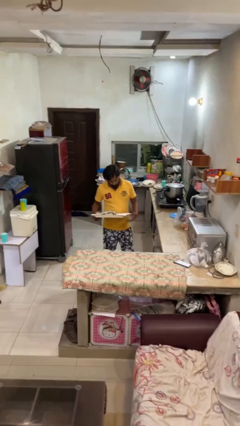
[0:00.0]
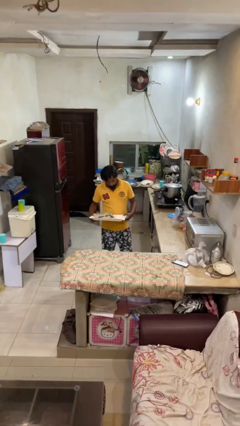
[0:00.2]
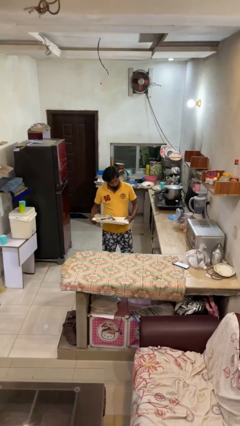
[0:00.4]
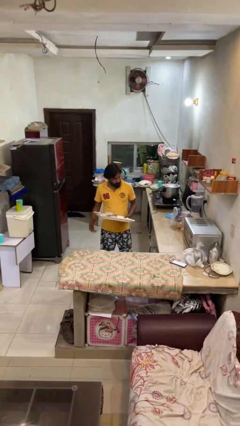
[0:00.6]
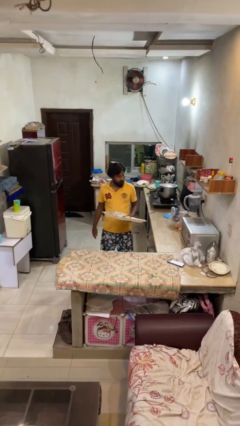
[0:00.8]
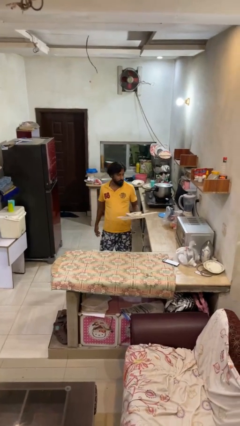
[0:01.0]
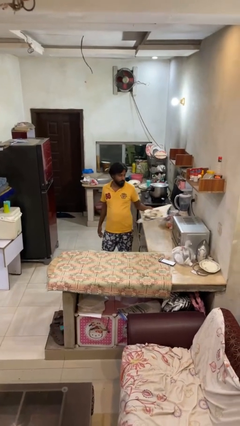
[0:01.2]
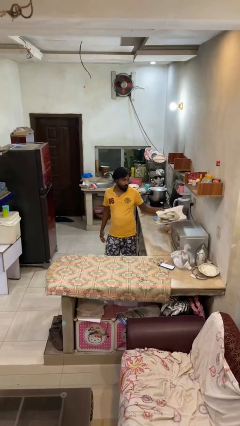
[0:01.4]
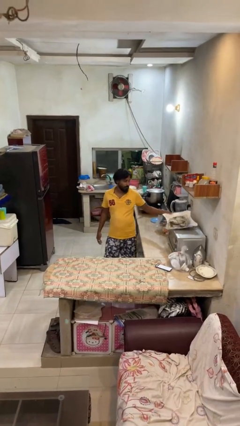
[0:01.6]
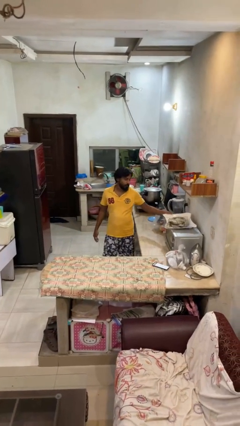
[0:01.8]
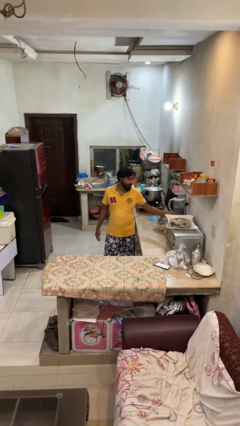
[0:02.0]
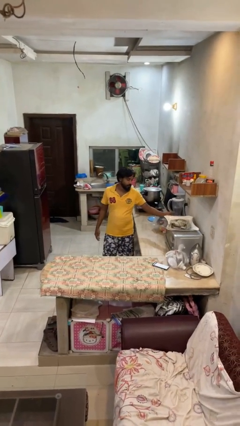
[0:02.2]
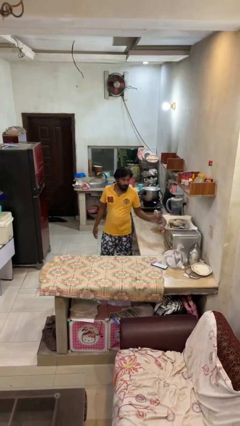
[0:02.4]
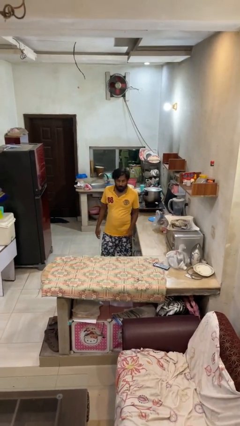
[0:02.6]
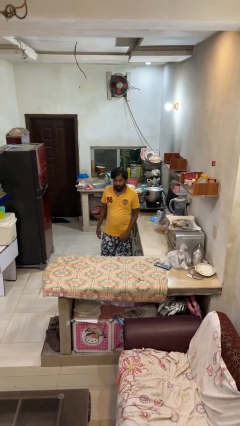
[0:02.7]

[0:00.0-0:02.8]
person puts down object on countertop

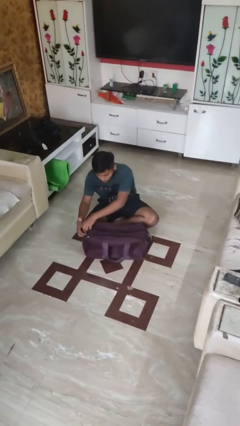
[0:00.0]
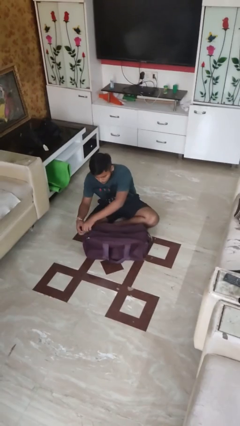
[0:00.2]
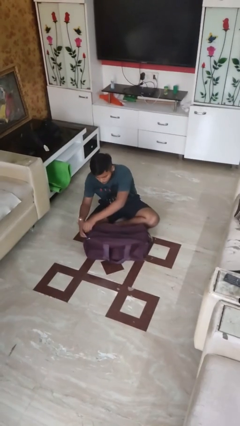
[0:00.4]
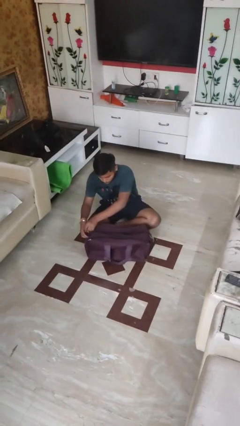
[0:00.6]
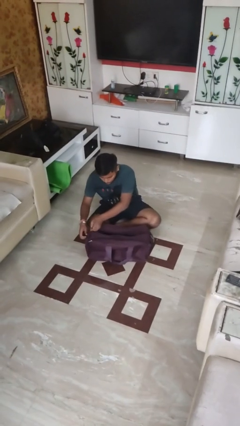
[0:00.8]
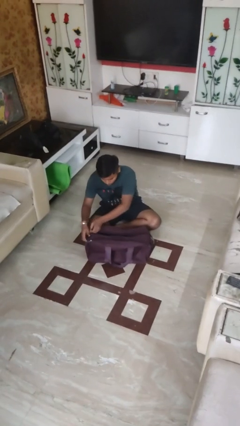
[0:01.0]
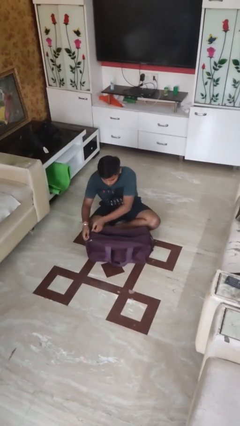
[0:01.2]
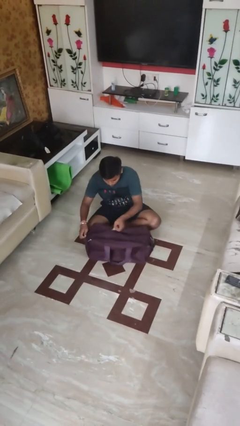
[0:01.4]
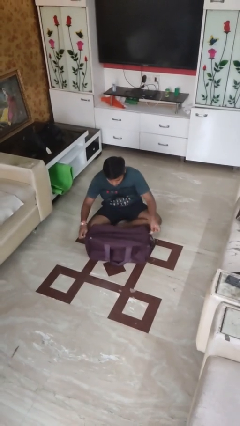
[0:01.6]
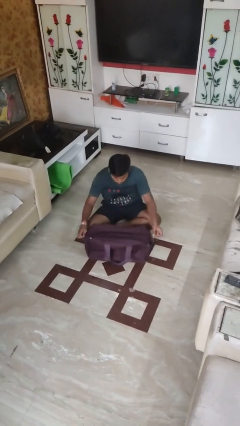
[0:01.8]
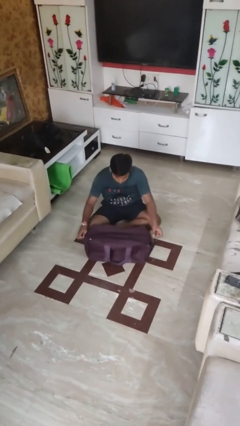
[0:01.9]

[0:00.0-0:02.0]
person closes suitcase

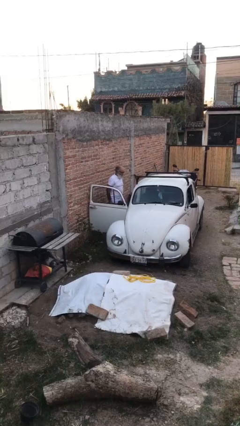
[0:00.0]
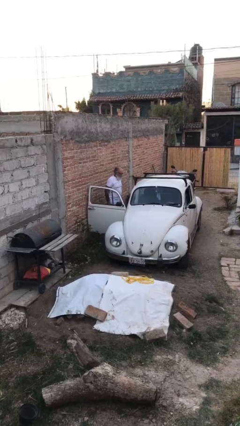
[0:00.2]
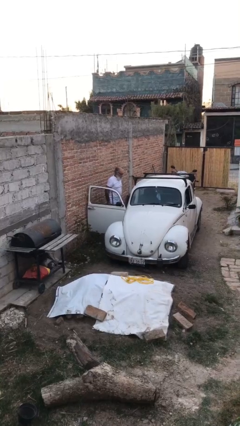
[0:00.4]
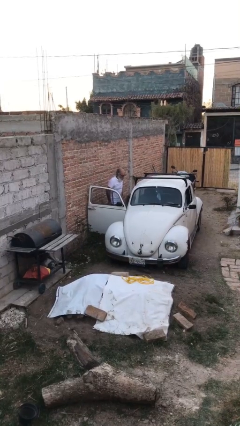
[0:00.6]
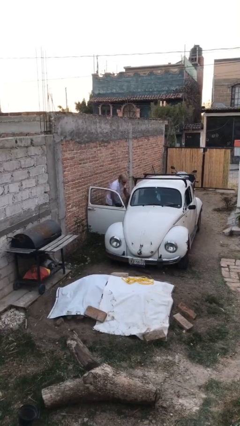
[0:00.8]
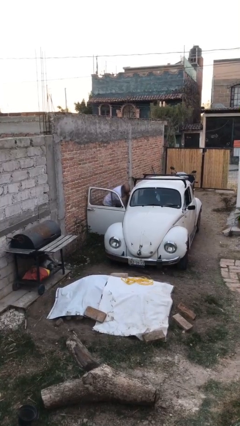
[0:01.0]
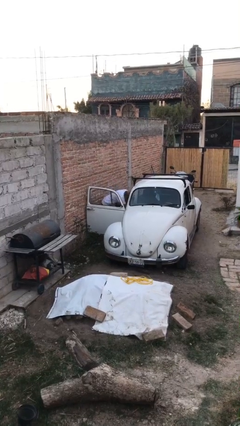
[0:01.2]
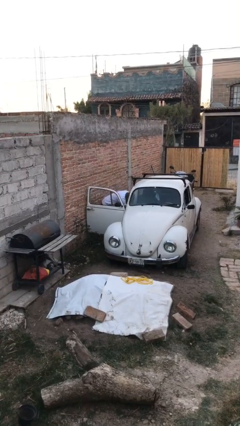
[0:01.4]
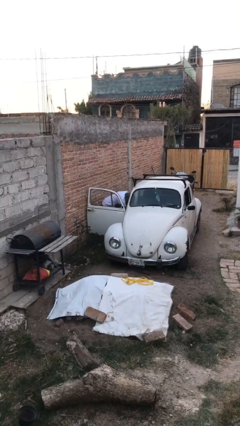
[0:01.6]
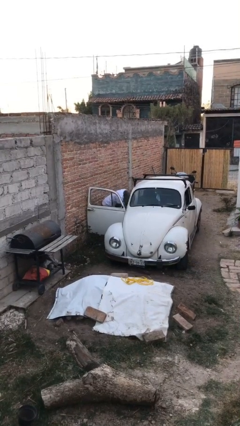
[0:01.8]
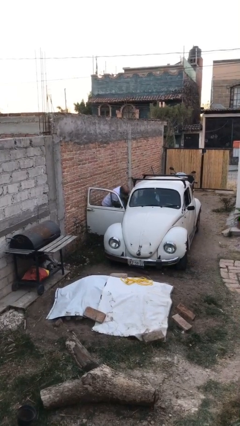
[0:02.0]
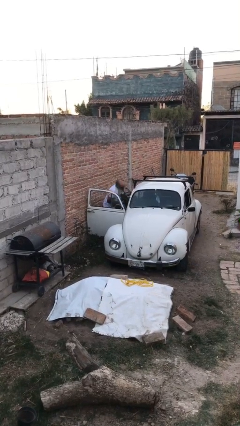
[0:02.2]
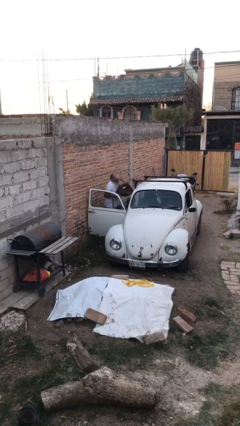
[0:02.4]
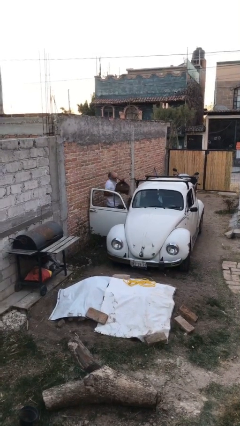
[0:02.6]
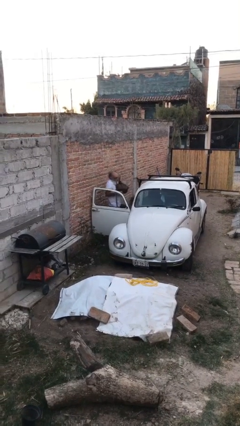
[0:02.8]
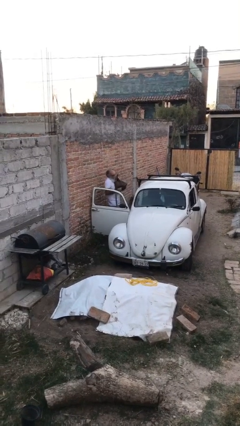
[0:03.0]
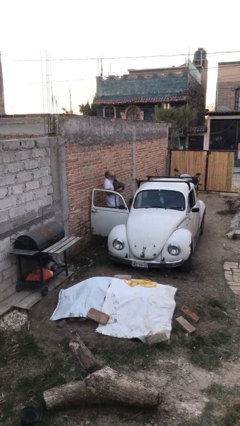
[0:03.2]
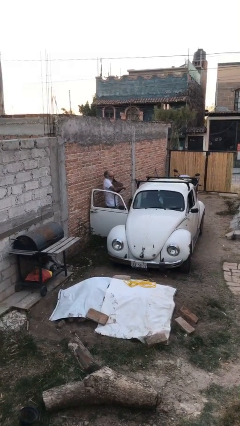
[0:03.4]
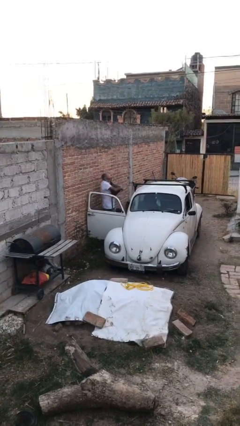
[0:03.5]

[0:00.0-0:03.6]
person unloads car

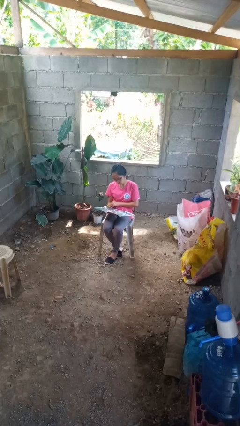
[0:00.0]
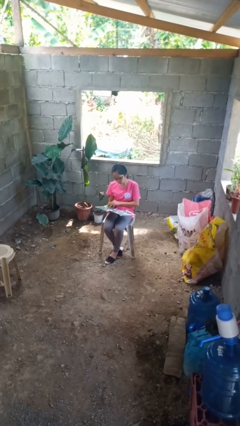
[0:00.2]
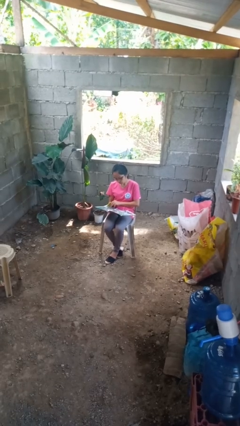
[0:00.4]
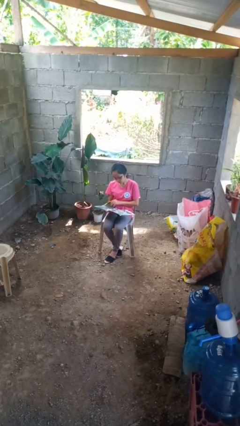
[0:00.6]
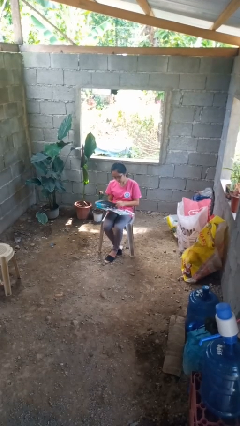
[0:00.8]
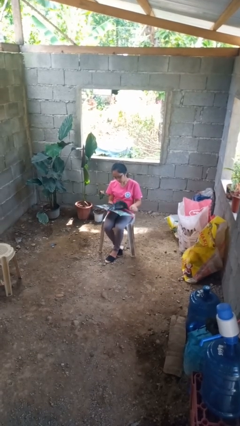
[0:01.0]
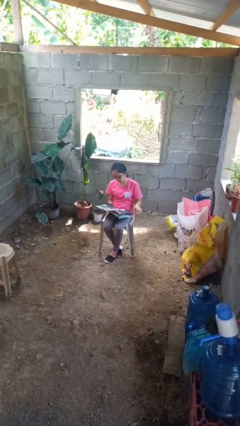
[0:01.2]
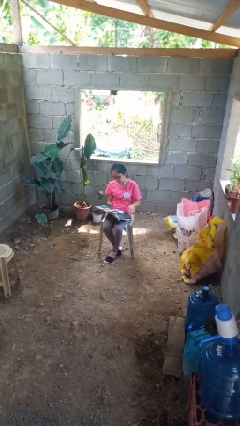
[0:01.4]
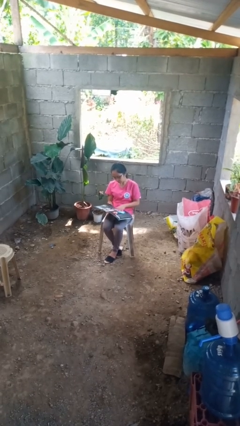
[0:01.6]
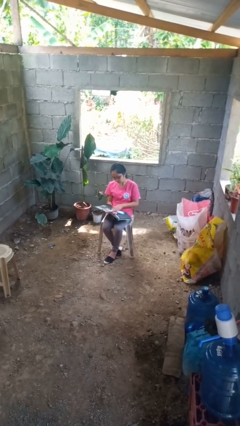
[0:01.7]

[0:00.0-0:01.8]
person reads magazine

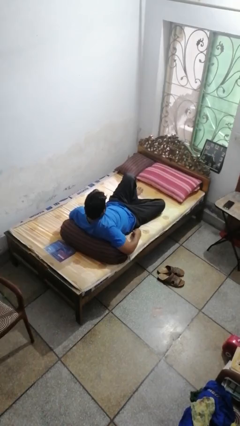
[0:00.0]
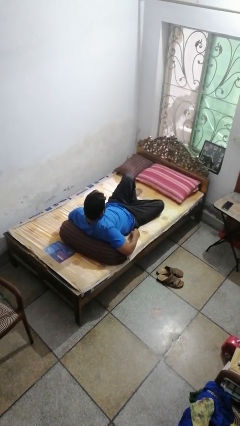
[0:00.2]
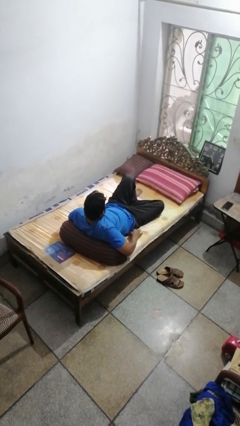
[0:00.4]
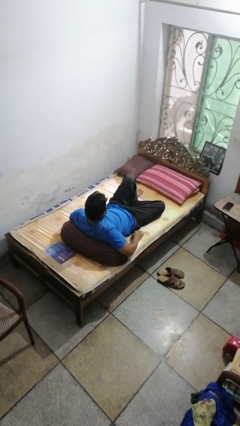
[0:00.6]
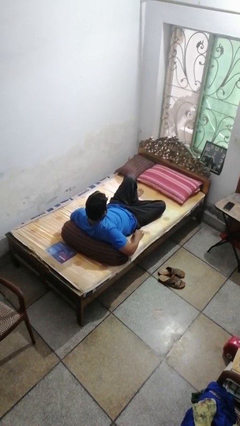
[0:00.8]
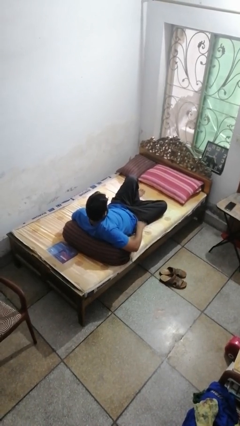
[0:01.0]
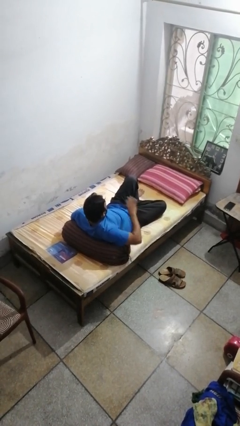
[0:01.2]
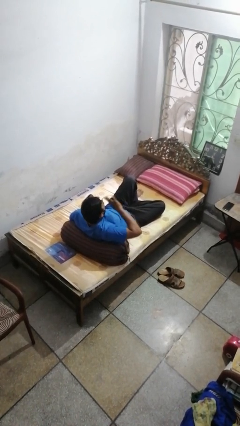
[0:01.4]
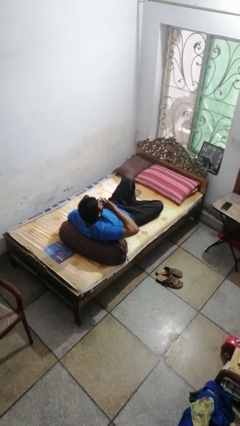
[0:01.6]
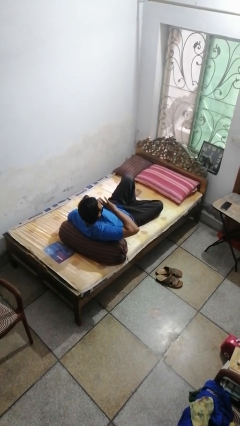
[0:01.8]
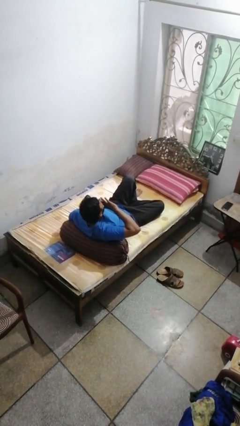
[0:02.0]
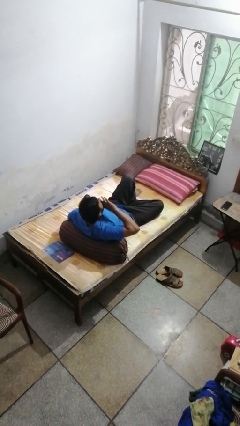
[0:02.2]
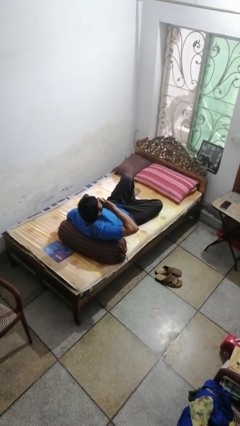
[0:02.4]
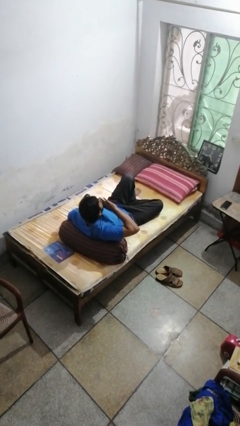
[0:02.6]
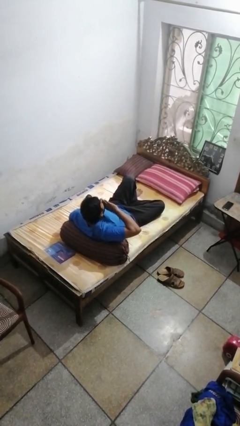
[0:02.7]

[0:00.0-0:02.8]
person yawns

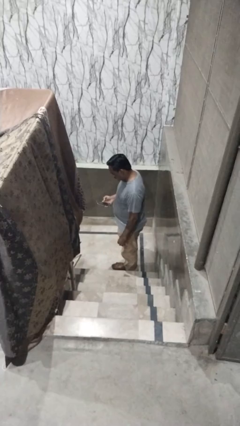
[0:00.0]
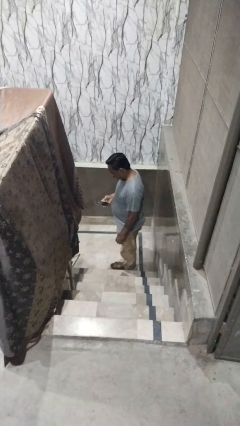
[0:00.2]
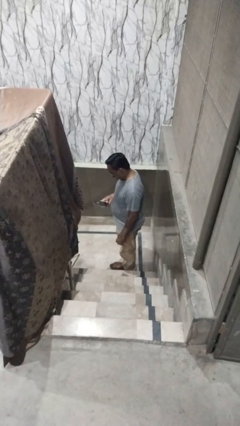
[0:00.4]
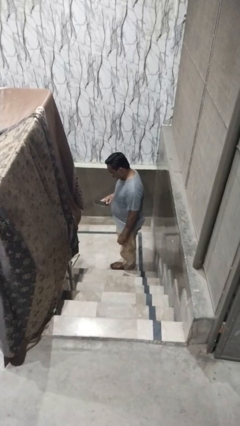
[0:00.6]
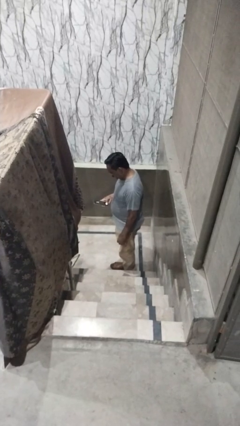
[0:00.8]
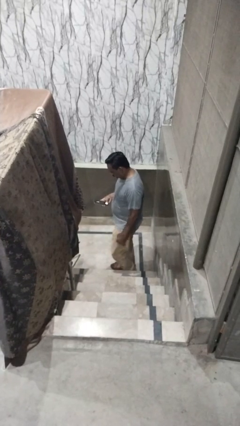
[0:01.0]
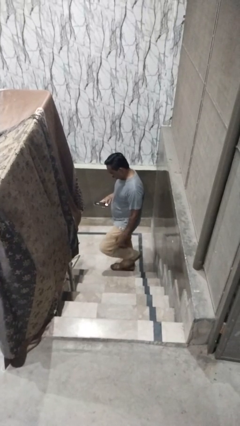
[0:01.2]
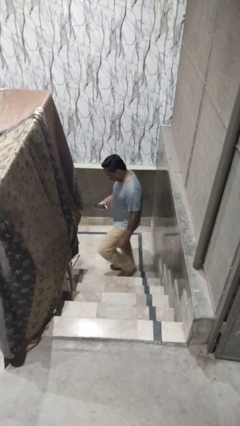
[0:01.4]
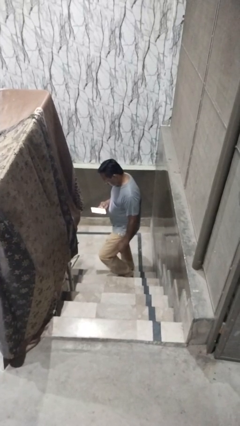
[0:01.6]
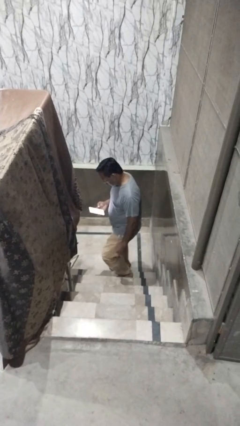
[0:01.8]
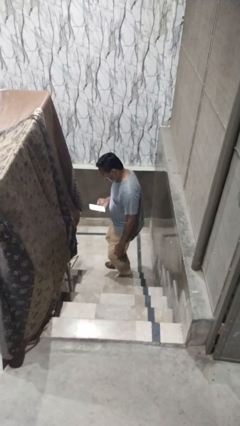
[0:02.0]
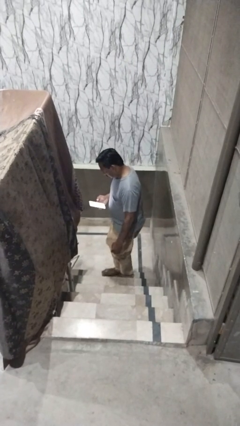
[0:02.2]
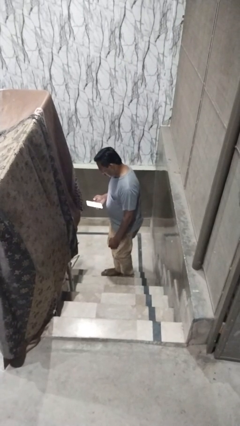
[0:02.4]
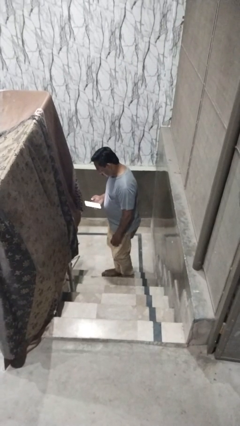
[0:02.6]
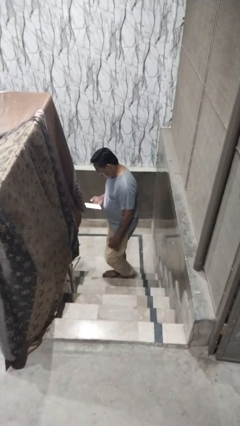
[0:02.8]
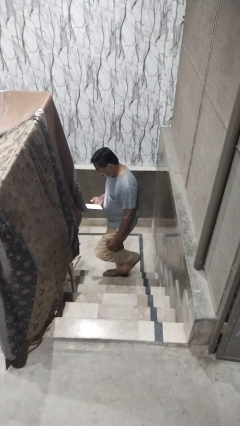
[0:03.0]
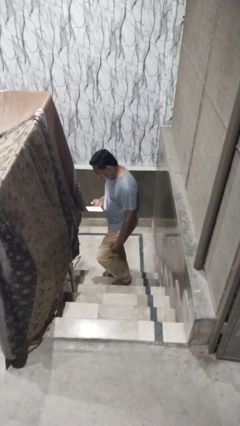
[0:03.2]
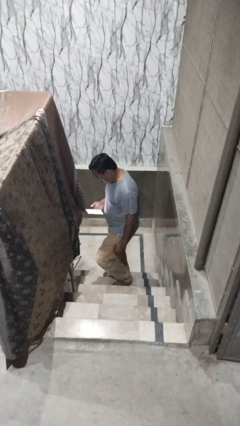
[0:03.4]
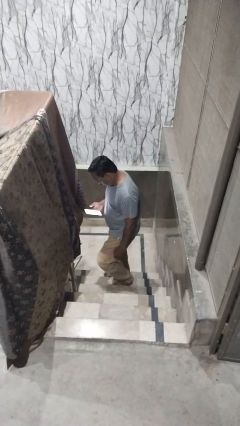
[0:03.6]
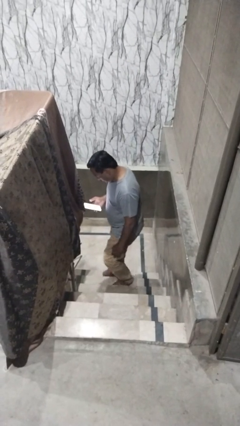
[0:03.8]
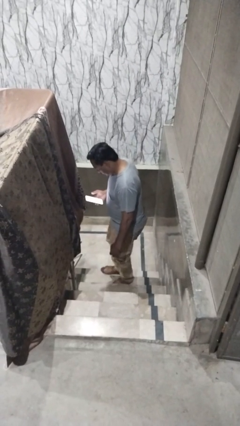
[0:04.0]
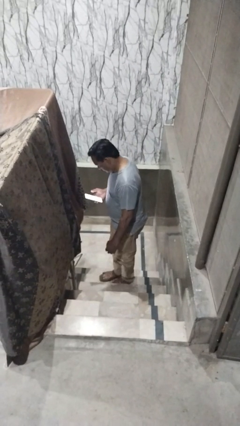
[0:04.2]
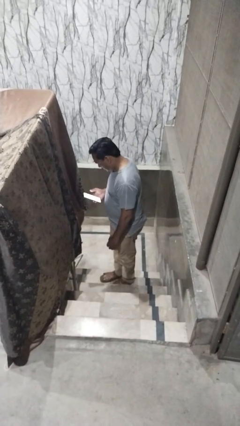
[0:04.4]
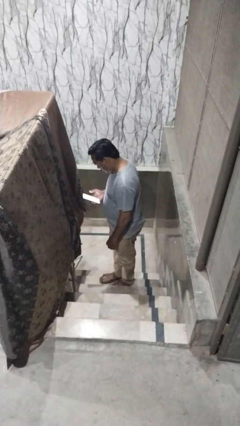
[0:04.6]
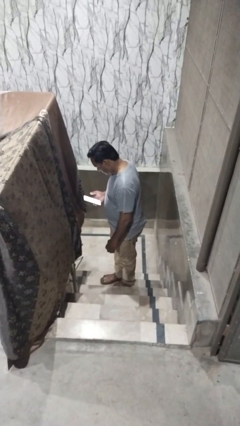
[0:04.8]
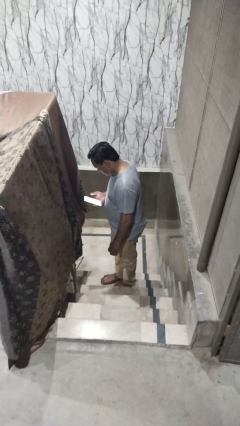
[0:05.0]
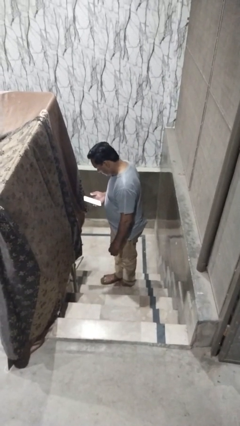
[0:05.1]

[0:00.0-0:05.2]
person climbs up stairs
